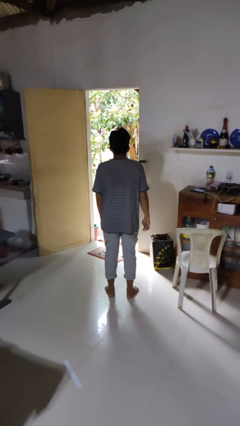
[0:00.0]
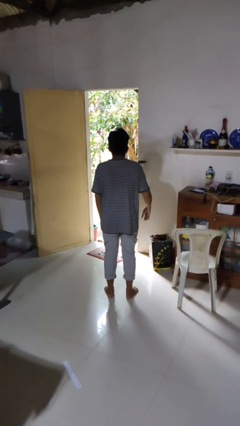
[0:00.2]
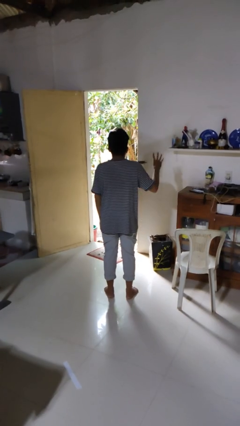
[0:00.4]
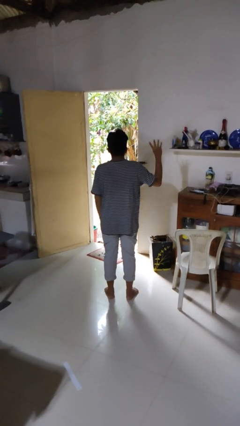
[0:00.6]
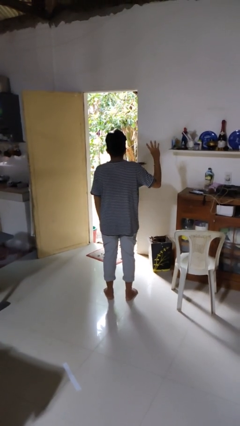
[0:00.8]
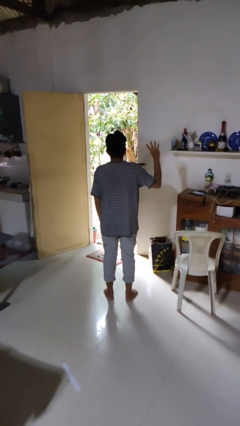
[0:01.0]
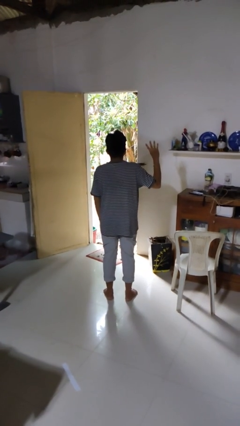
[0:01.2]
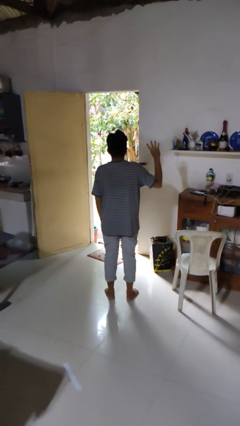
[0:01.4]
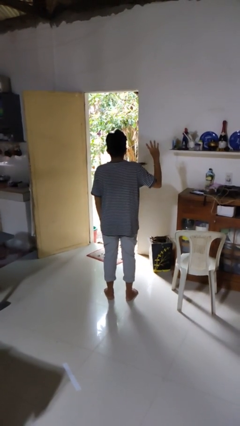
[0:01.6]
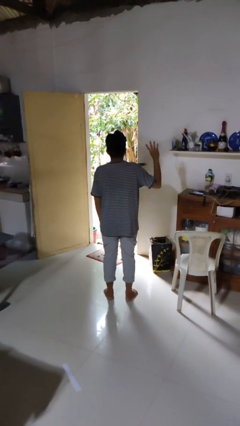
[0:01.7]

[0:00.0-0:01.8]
person gestures number four

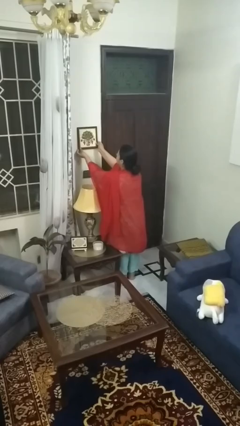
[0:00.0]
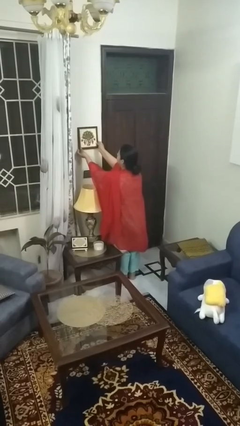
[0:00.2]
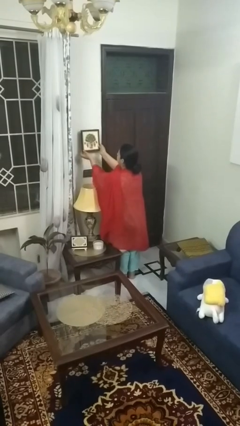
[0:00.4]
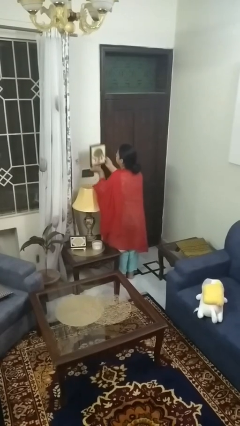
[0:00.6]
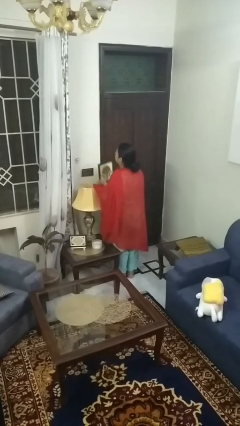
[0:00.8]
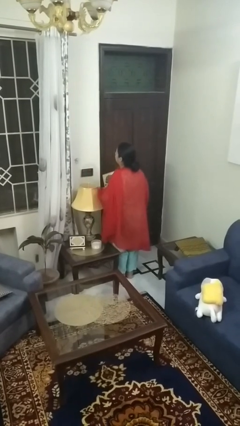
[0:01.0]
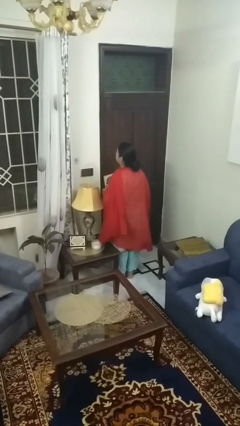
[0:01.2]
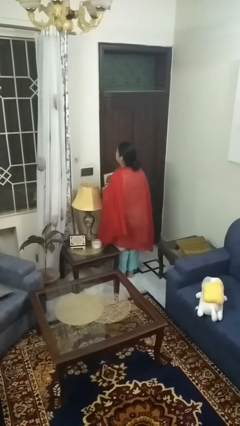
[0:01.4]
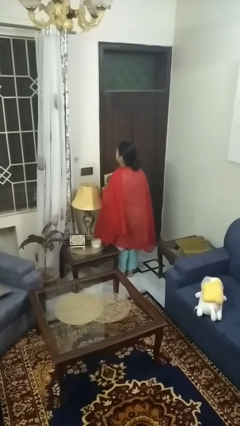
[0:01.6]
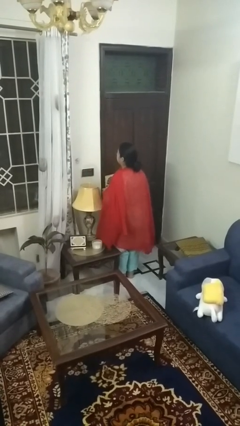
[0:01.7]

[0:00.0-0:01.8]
person takes down picture frame

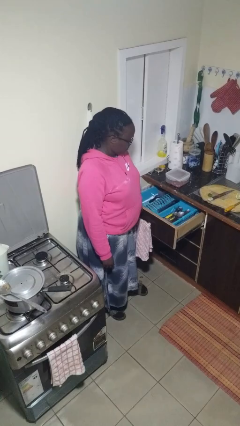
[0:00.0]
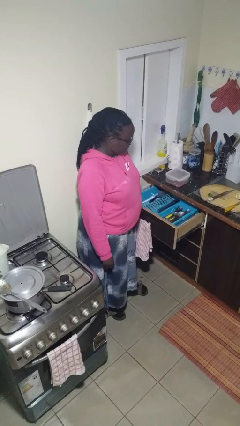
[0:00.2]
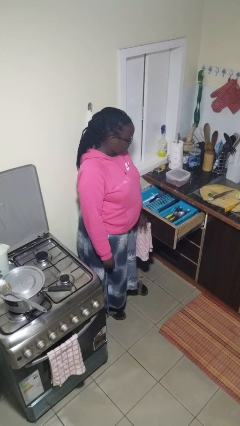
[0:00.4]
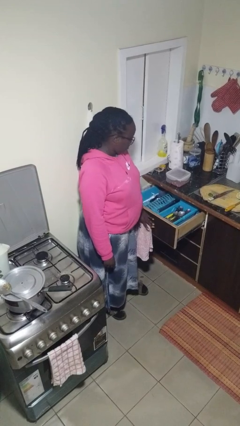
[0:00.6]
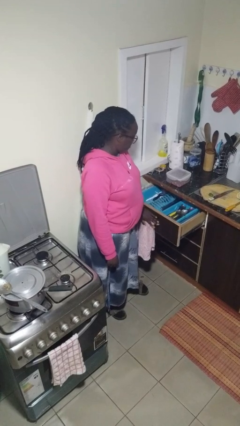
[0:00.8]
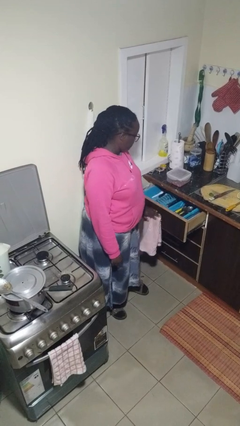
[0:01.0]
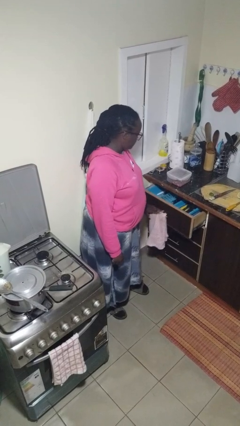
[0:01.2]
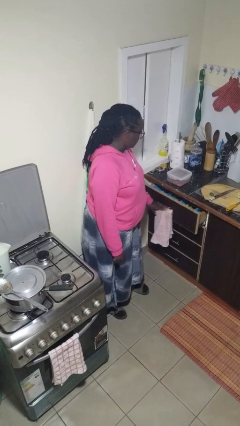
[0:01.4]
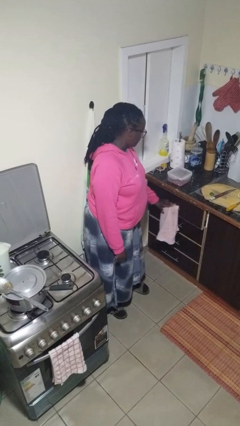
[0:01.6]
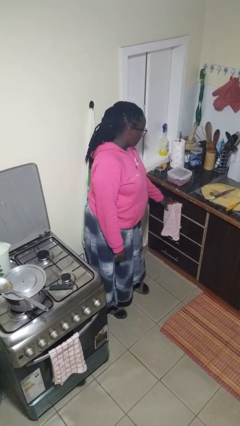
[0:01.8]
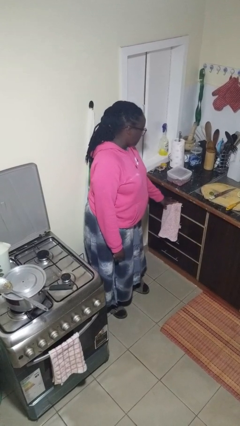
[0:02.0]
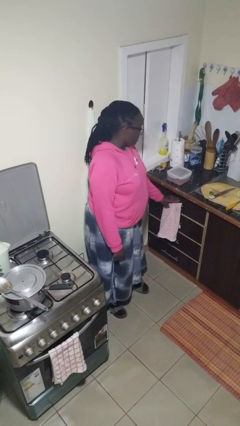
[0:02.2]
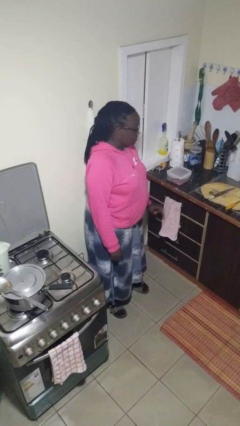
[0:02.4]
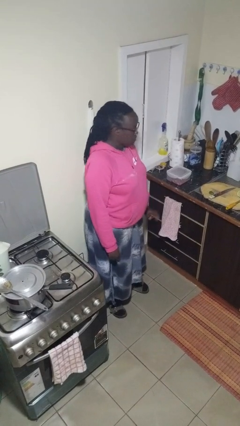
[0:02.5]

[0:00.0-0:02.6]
person closes kitchen drawer

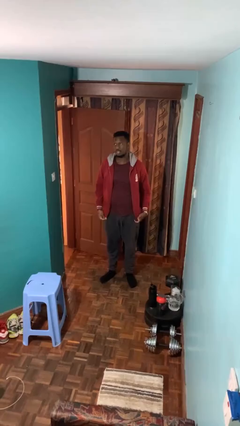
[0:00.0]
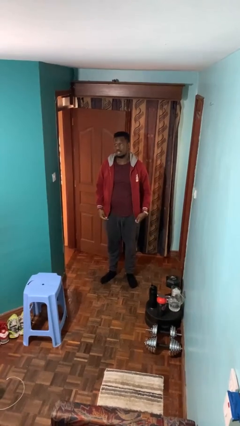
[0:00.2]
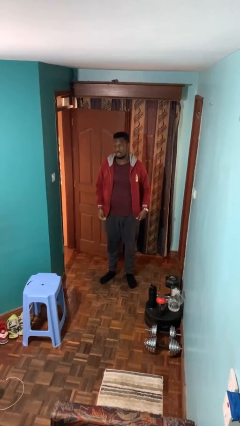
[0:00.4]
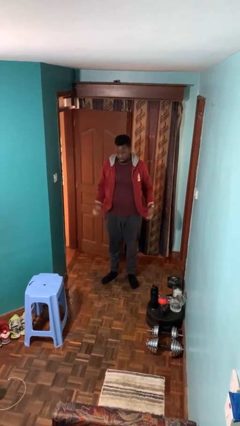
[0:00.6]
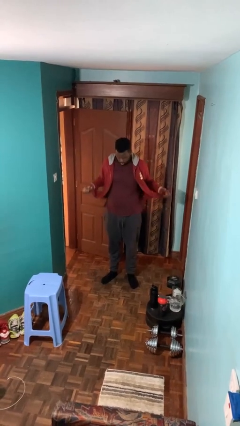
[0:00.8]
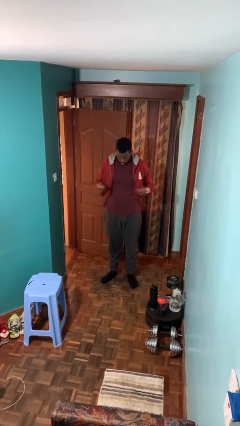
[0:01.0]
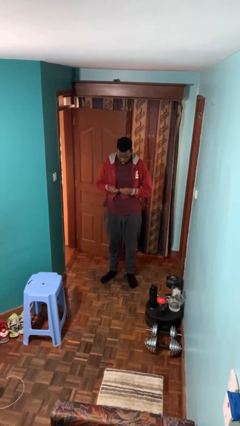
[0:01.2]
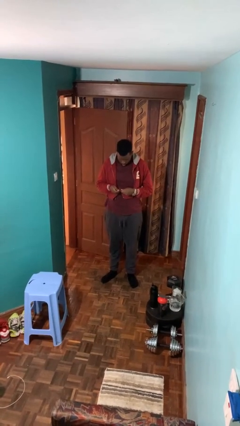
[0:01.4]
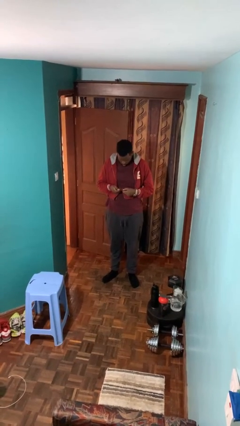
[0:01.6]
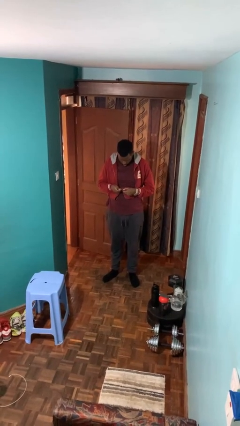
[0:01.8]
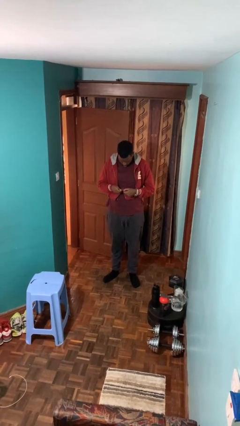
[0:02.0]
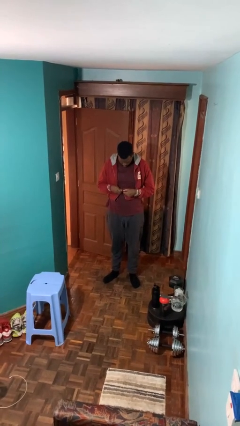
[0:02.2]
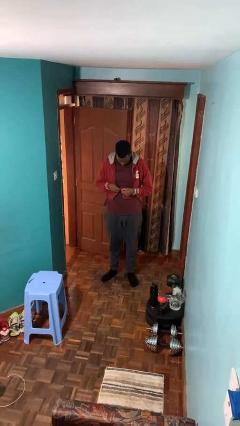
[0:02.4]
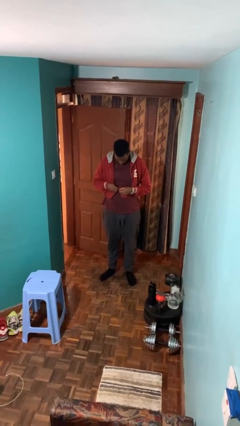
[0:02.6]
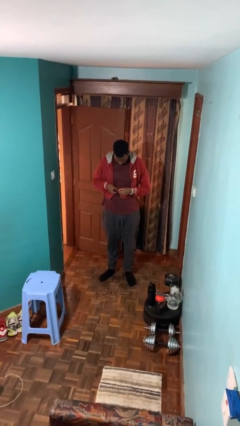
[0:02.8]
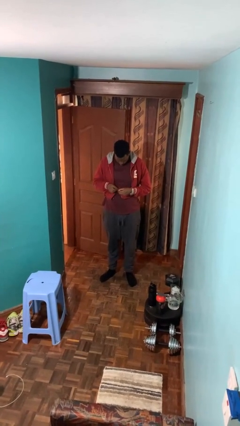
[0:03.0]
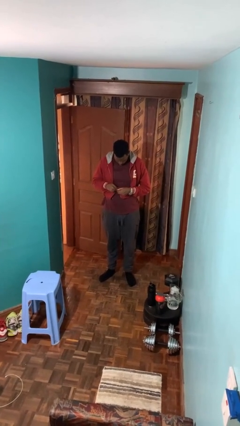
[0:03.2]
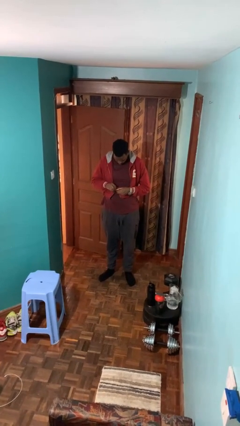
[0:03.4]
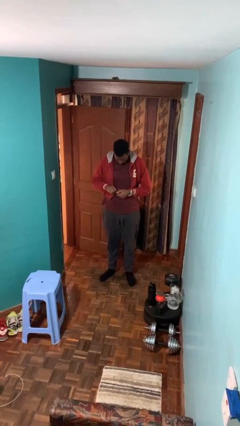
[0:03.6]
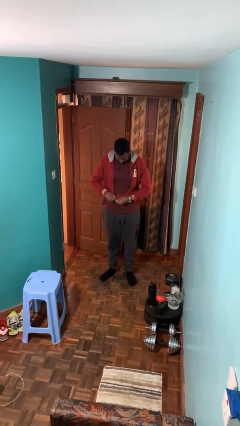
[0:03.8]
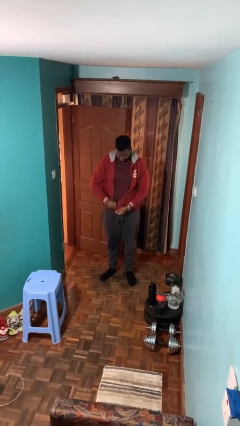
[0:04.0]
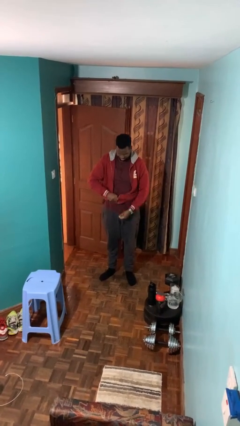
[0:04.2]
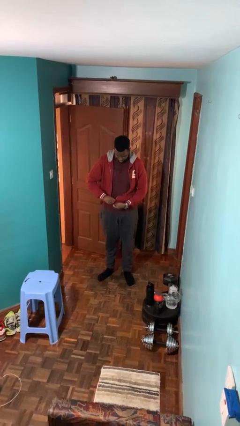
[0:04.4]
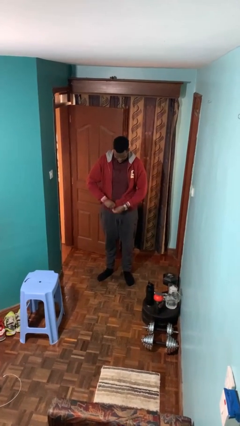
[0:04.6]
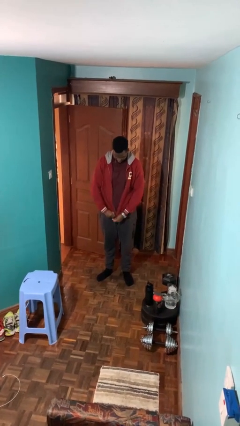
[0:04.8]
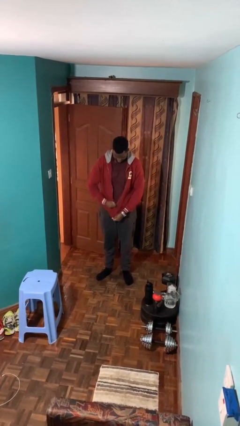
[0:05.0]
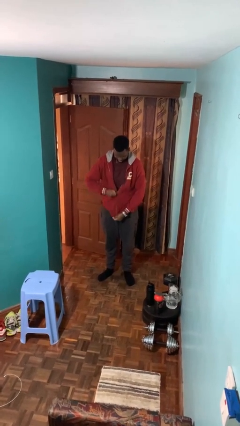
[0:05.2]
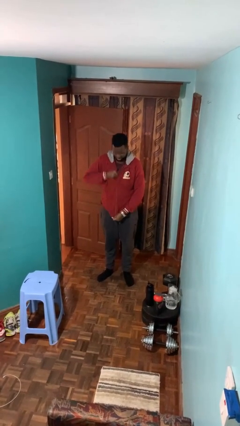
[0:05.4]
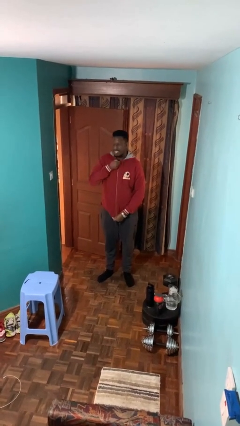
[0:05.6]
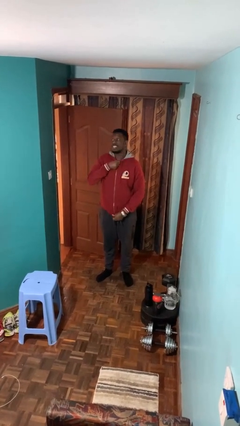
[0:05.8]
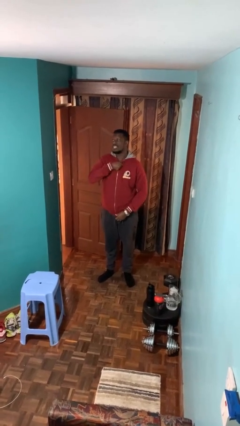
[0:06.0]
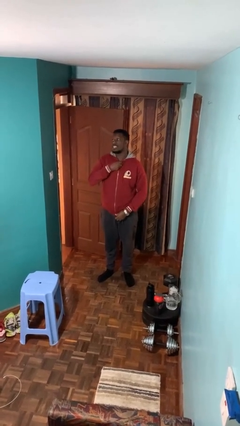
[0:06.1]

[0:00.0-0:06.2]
person zips up jacket

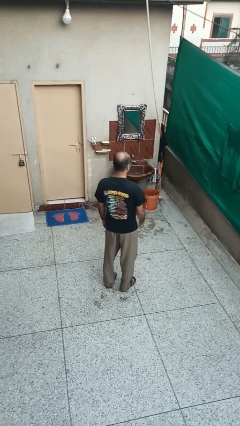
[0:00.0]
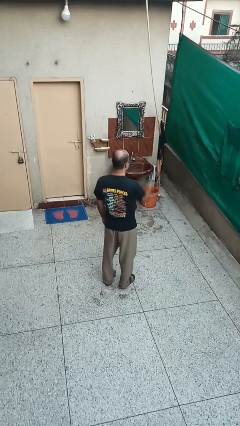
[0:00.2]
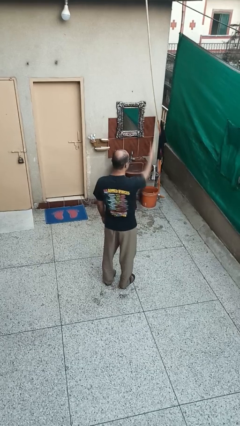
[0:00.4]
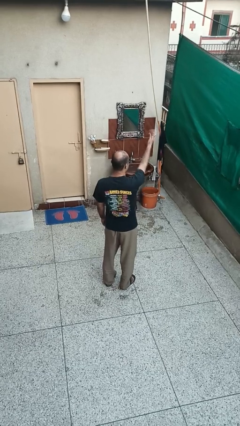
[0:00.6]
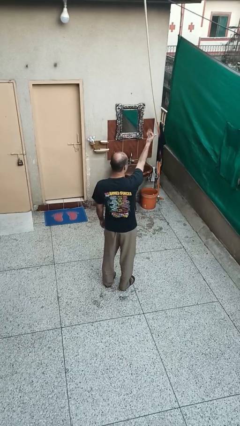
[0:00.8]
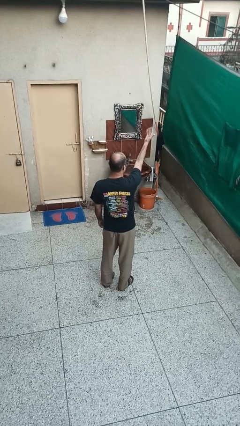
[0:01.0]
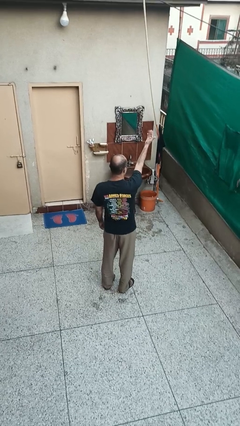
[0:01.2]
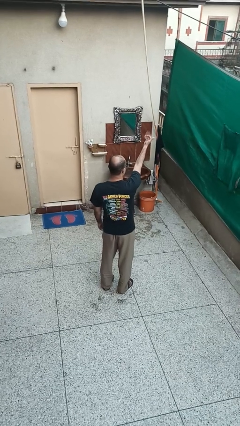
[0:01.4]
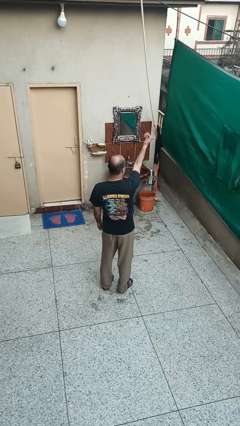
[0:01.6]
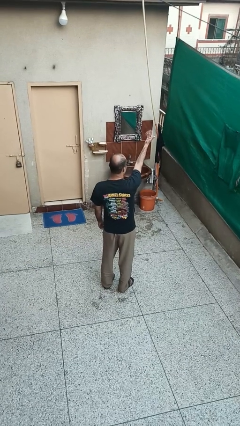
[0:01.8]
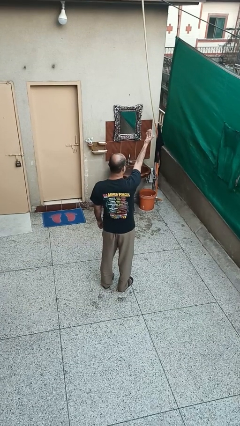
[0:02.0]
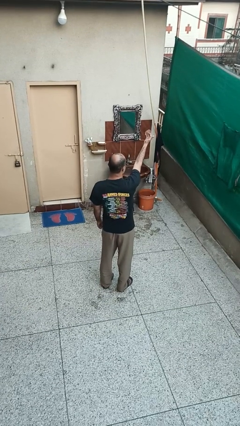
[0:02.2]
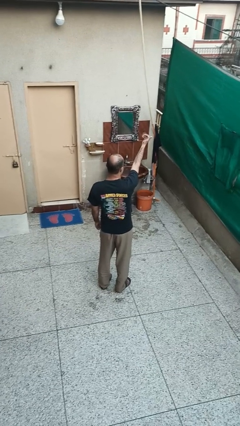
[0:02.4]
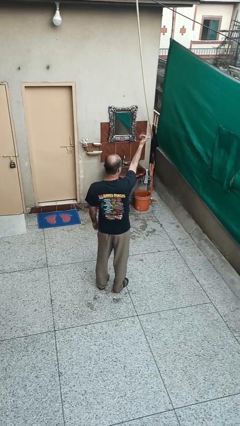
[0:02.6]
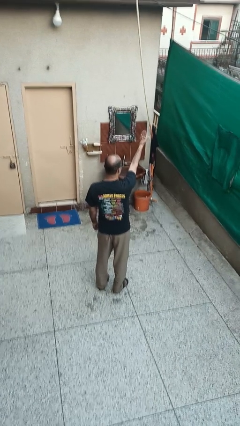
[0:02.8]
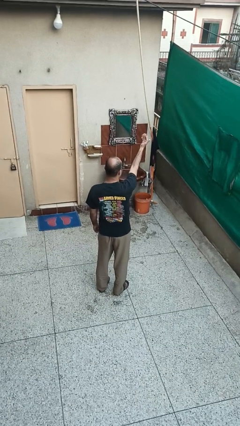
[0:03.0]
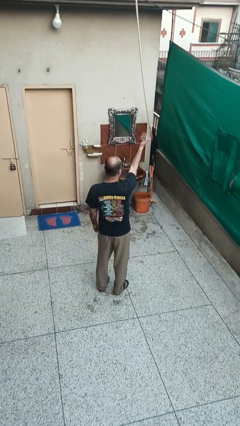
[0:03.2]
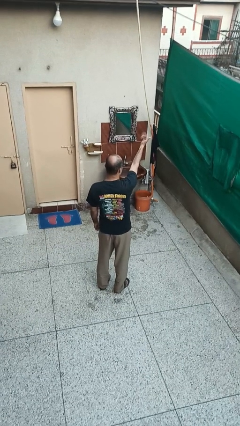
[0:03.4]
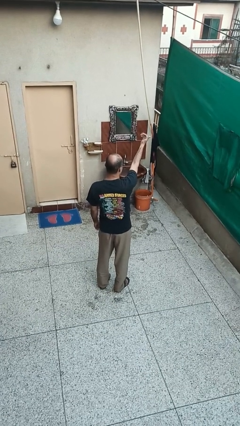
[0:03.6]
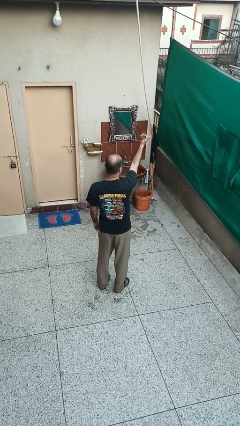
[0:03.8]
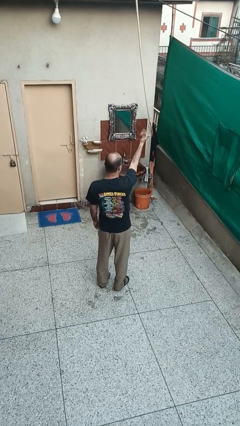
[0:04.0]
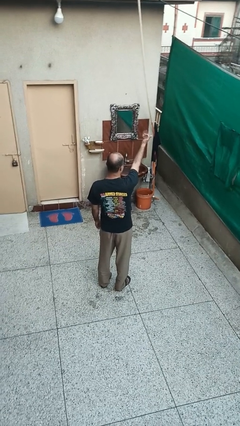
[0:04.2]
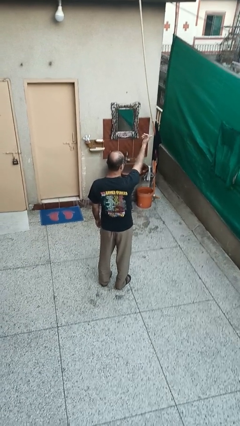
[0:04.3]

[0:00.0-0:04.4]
person gestures come here

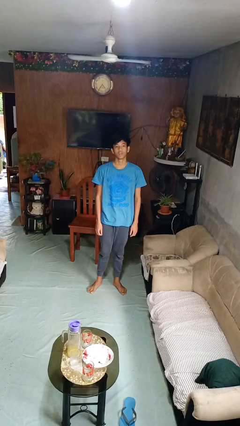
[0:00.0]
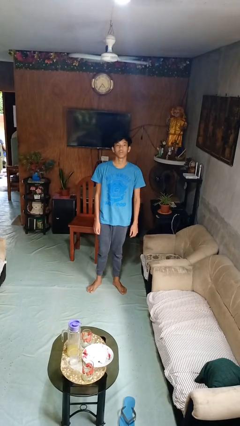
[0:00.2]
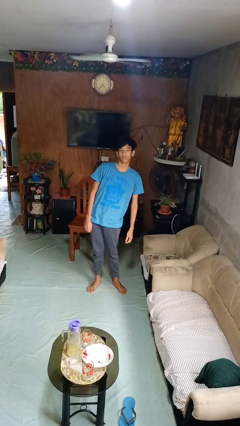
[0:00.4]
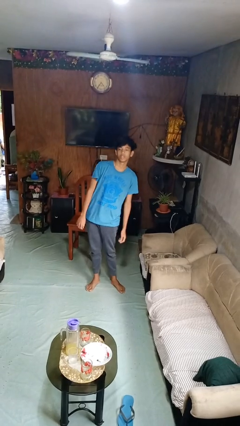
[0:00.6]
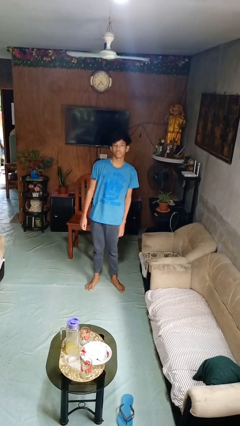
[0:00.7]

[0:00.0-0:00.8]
person dances in place

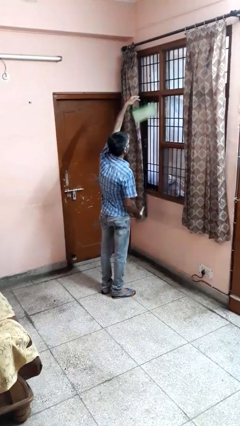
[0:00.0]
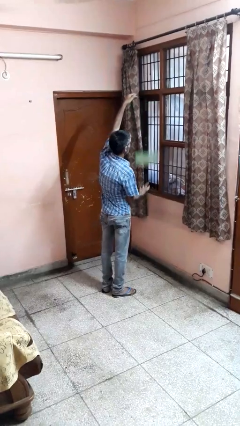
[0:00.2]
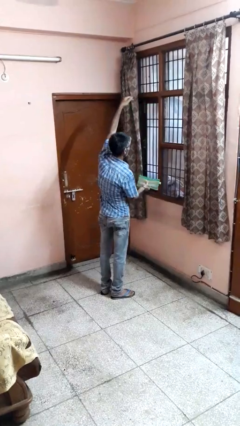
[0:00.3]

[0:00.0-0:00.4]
person drops object
